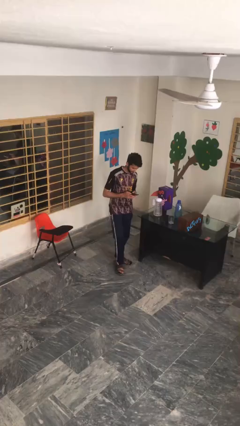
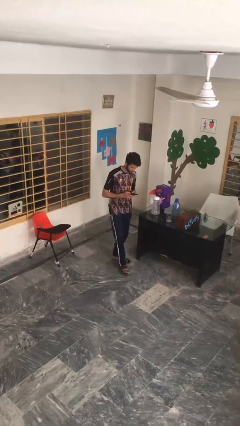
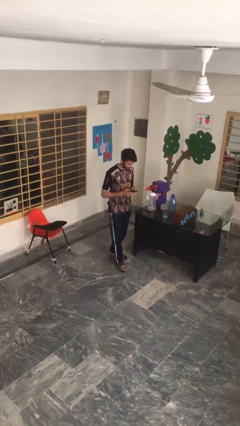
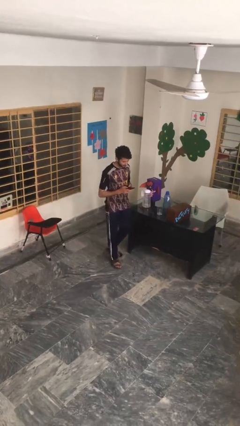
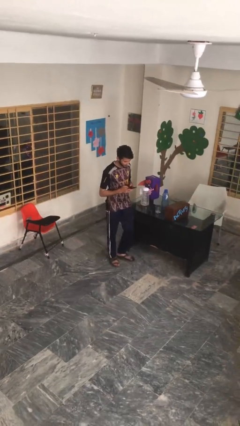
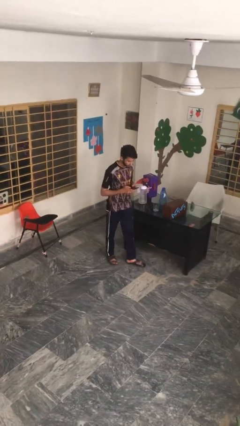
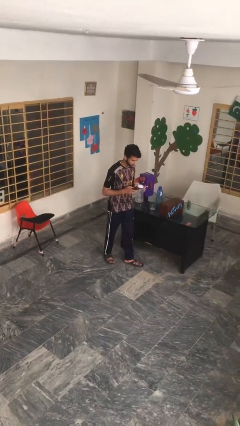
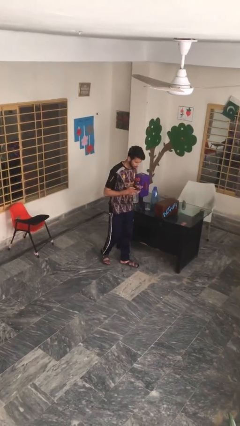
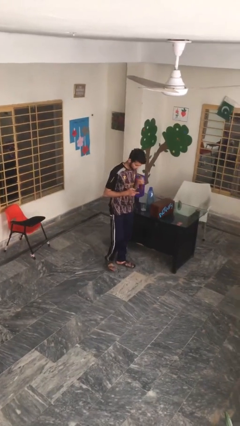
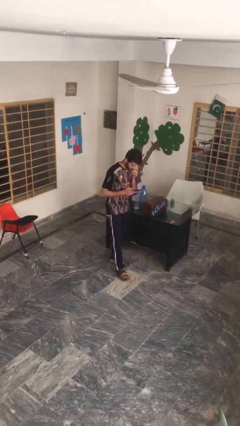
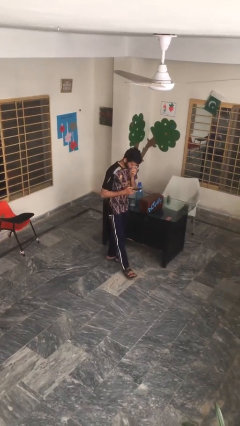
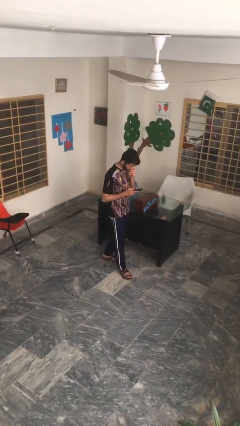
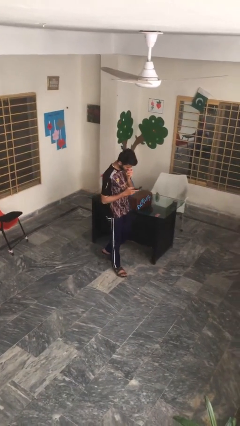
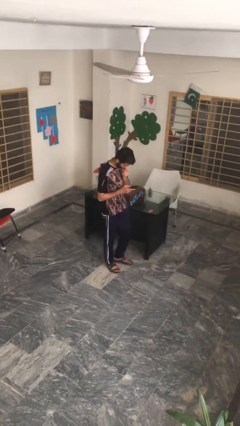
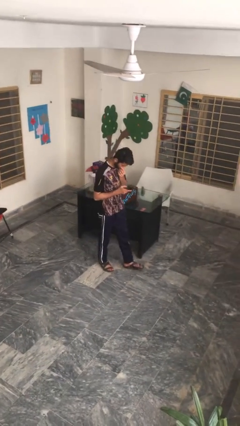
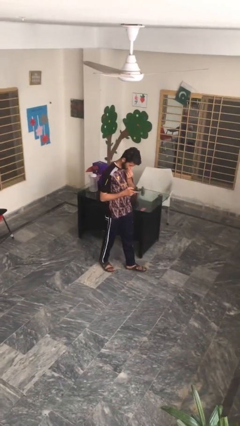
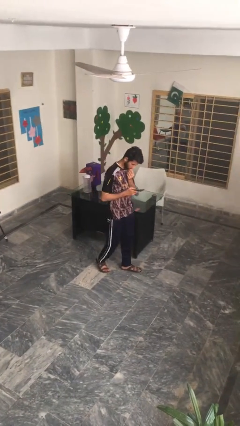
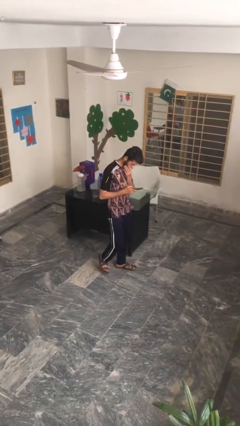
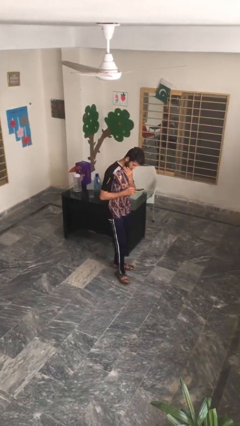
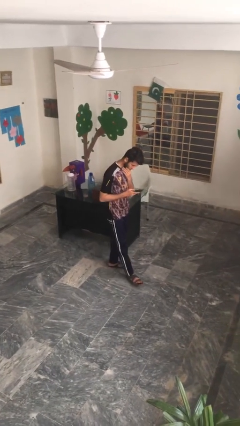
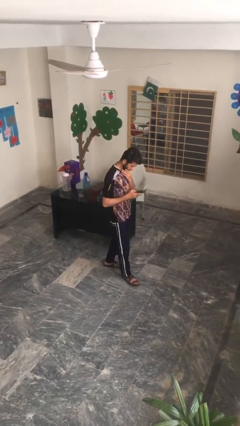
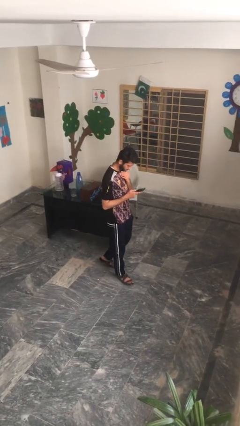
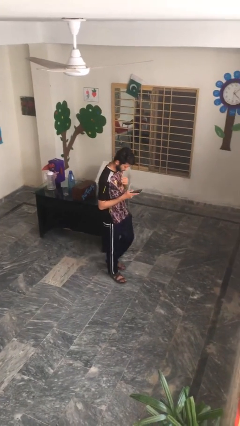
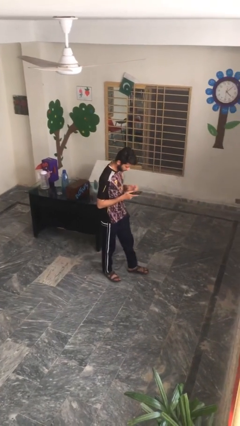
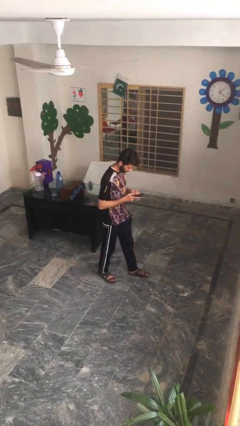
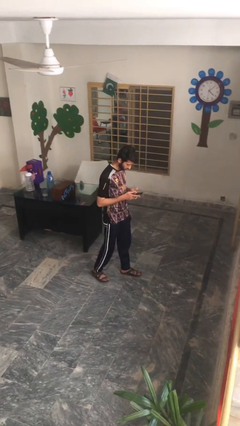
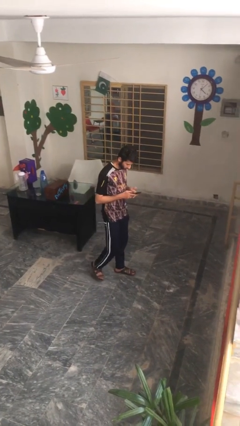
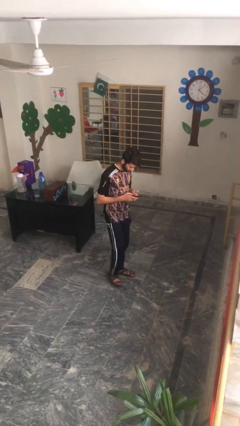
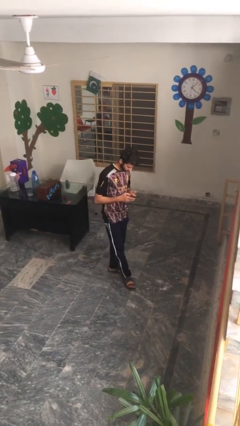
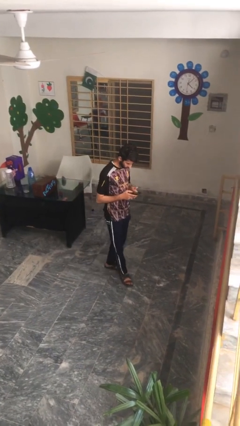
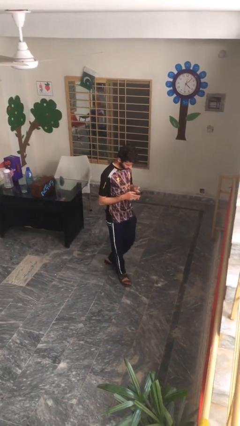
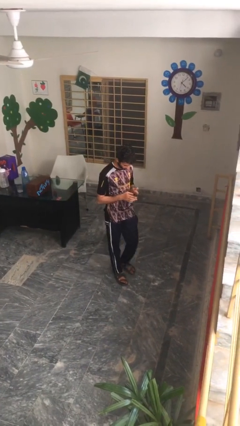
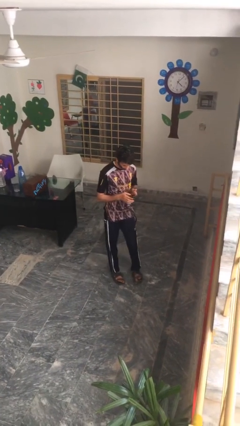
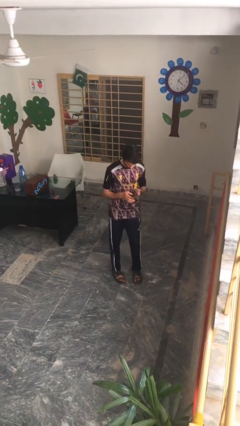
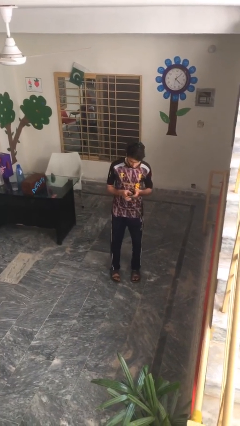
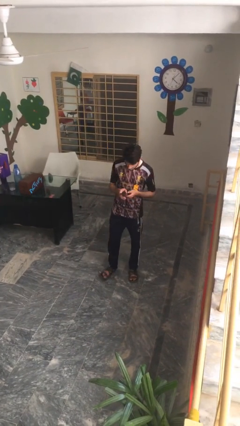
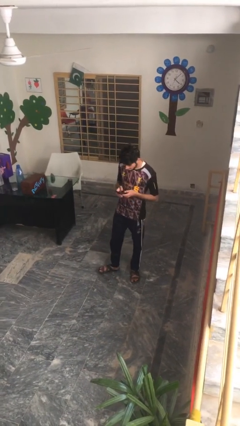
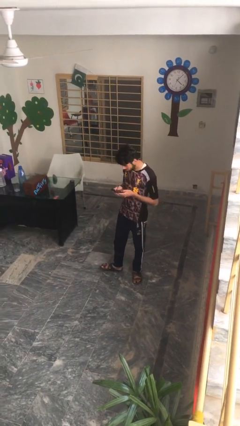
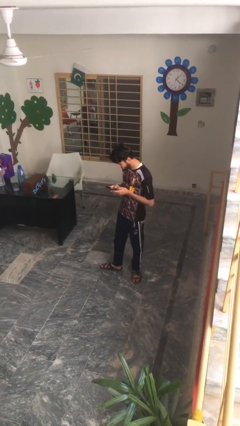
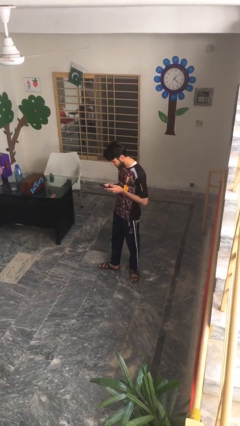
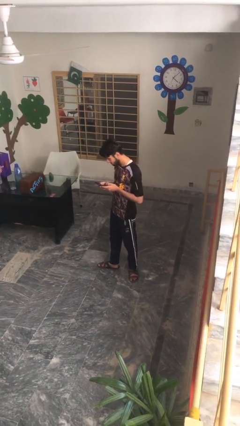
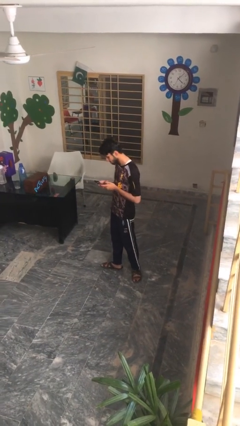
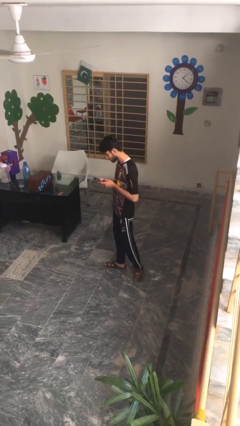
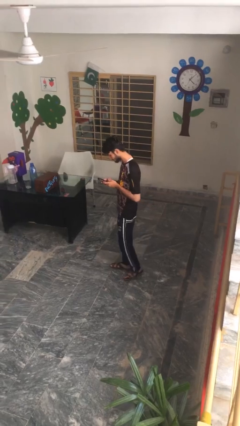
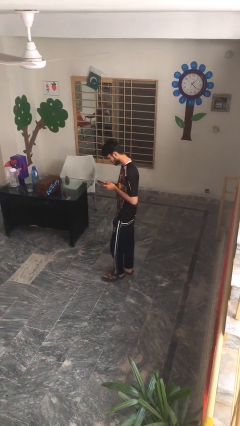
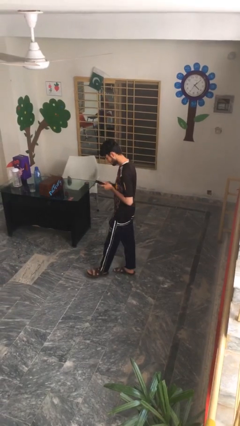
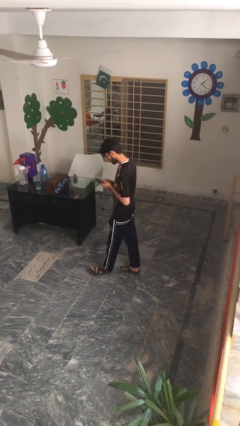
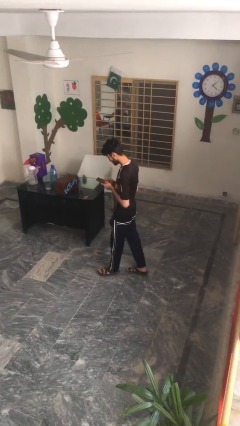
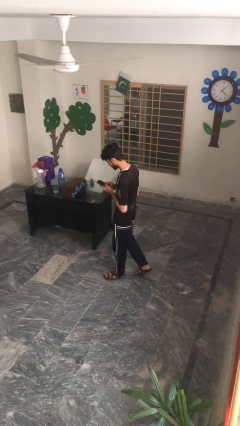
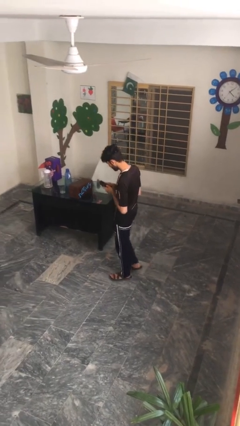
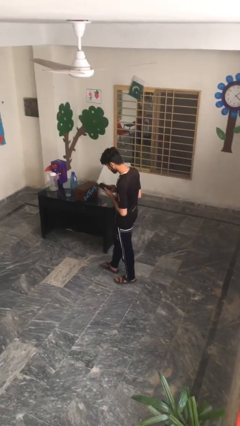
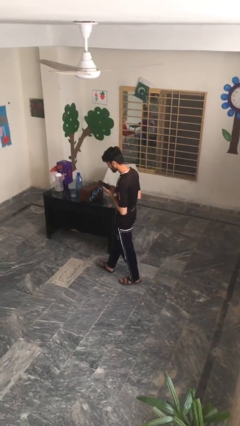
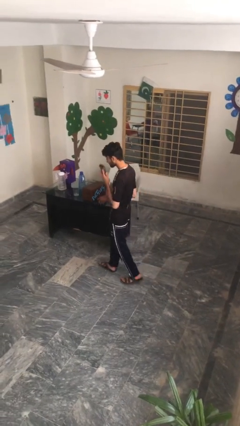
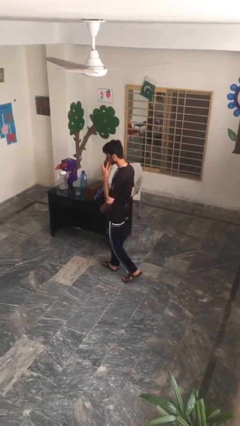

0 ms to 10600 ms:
person texts on phone

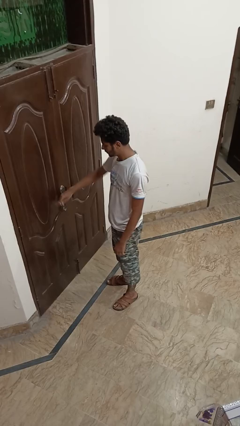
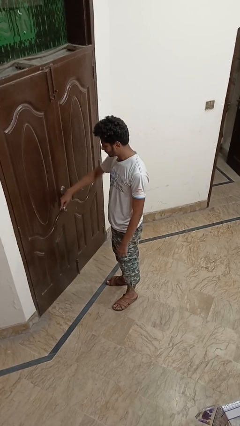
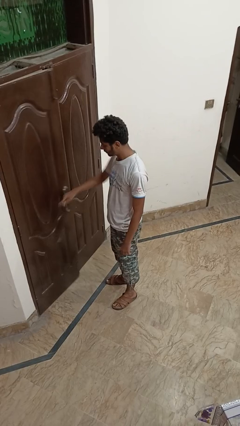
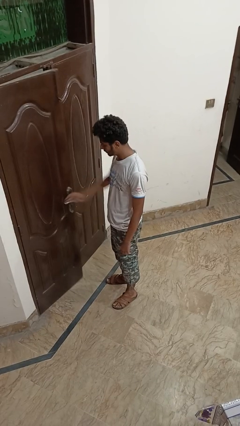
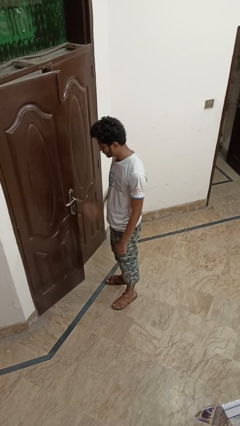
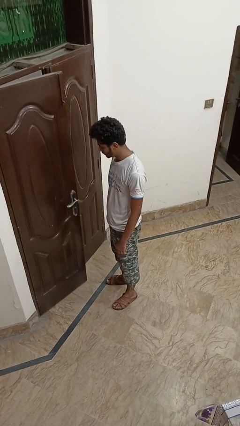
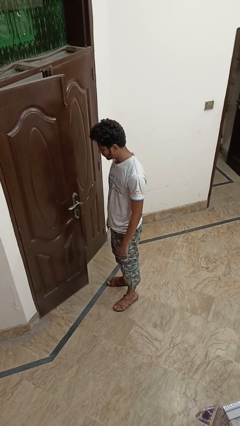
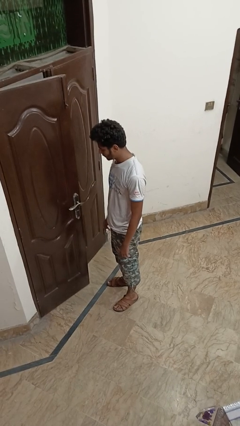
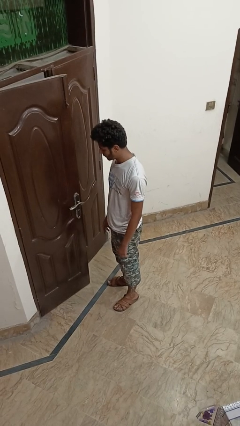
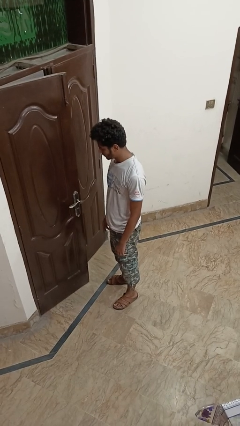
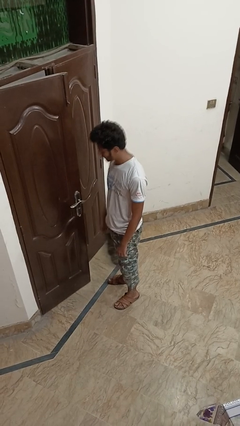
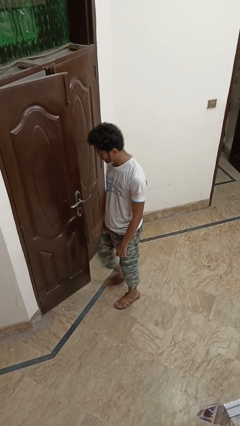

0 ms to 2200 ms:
person opens facility door

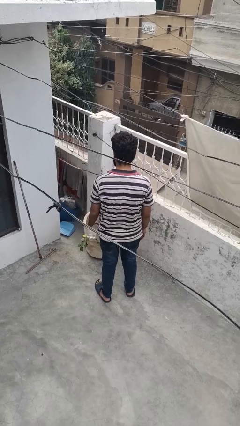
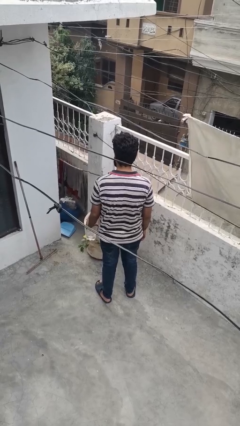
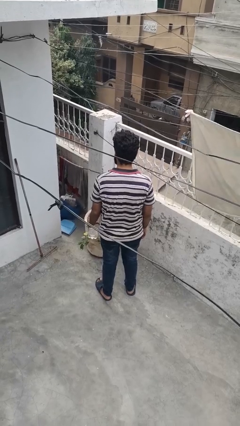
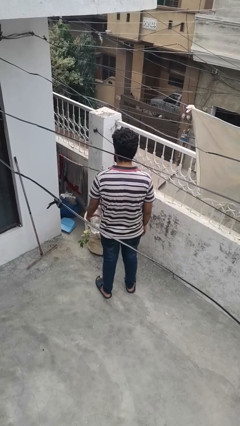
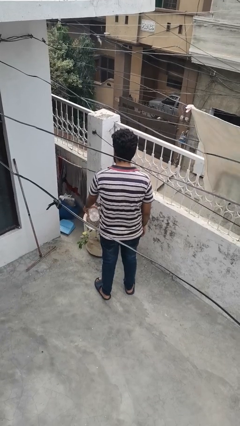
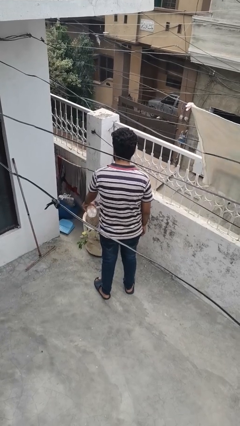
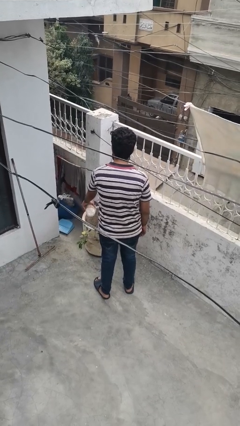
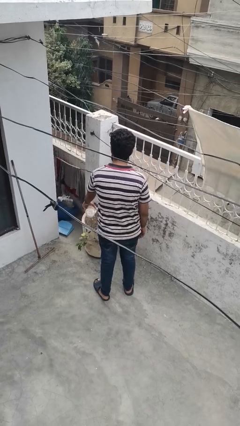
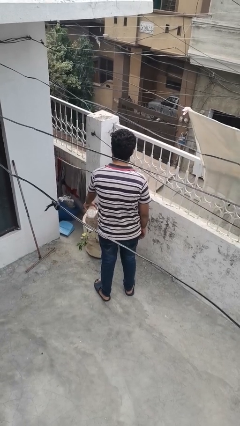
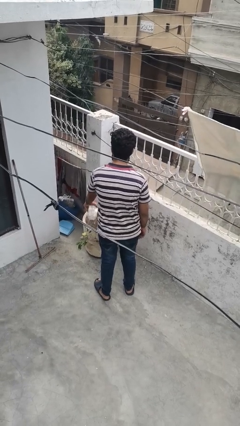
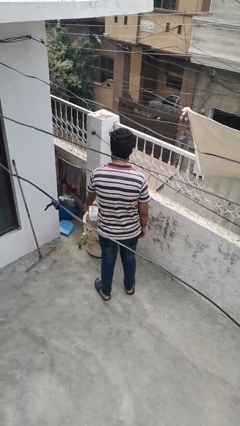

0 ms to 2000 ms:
person waters houseplant

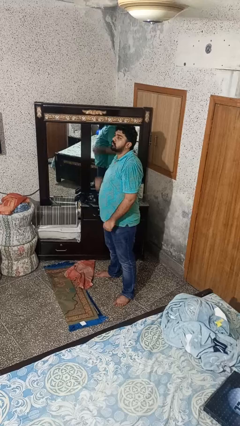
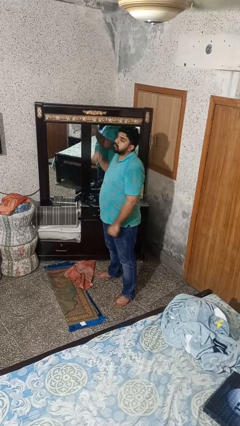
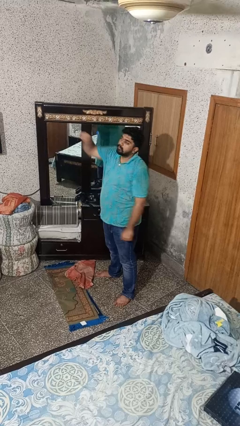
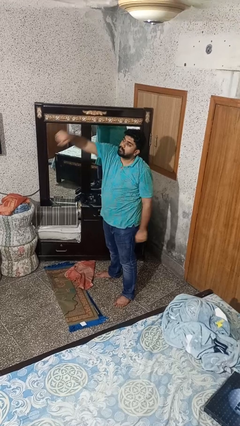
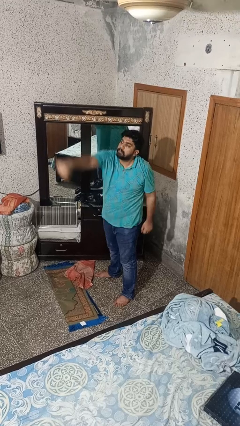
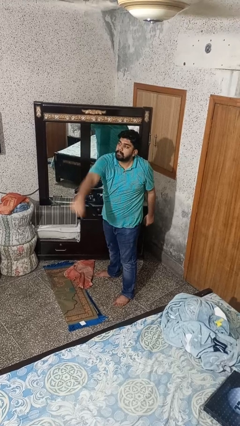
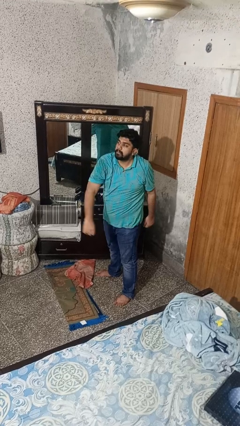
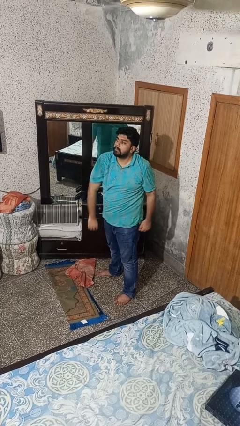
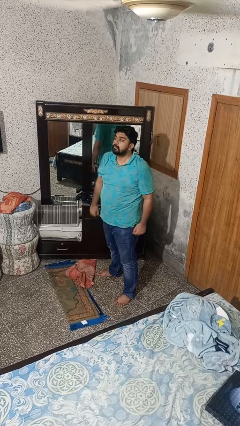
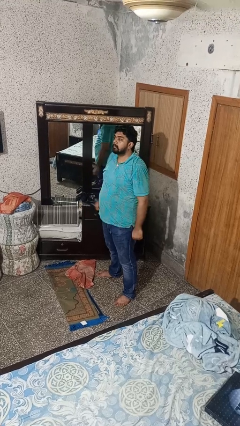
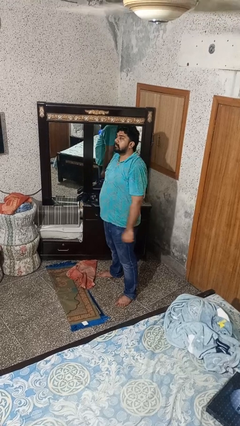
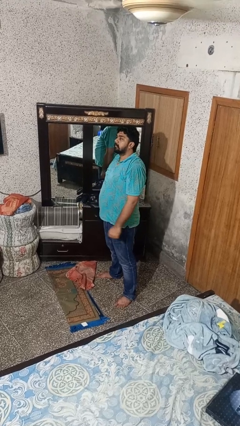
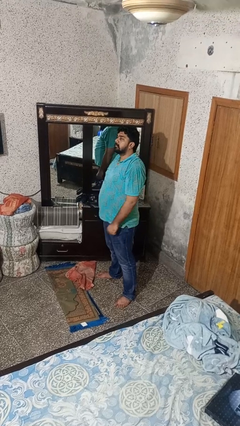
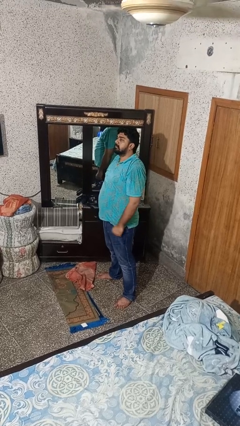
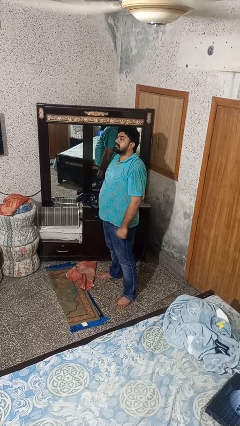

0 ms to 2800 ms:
person punches

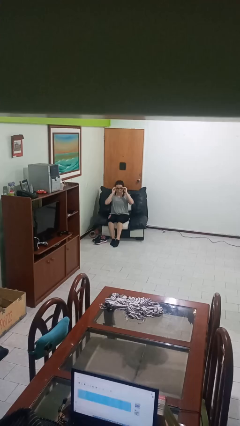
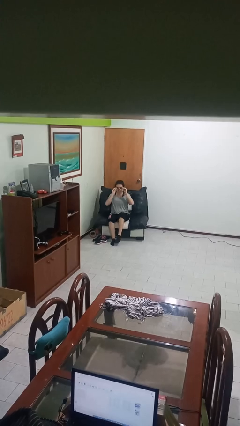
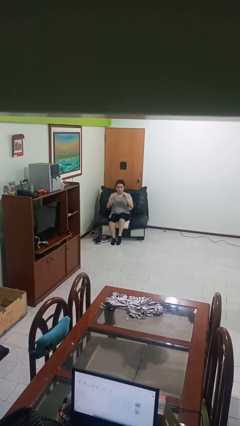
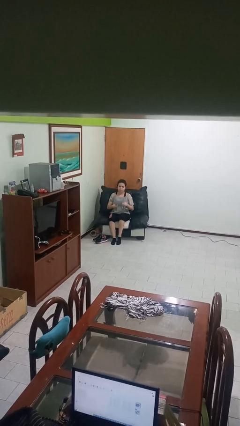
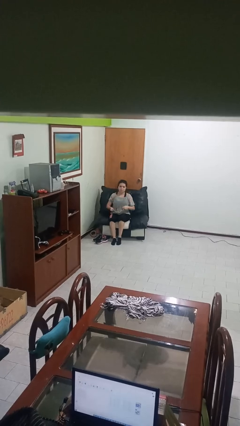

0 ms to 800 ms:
person takes off glasses
